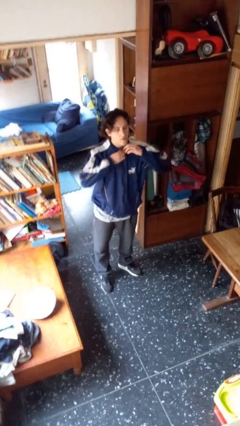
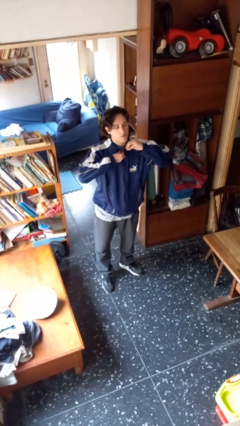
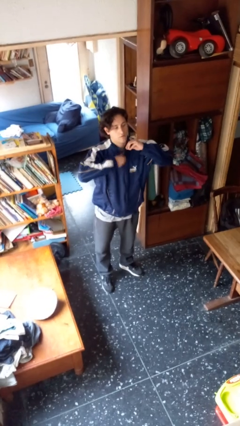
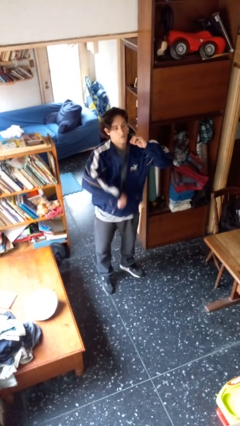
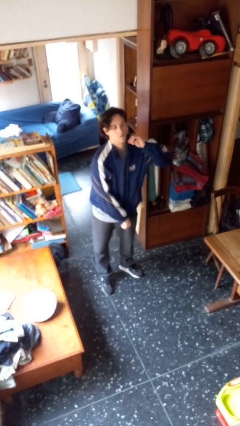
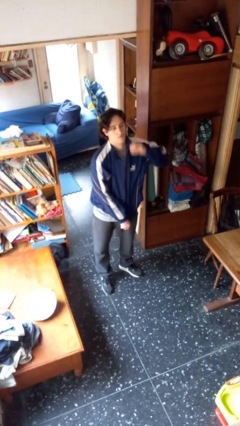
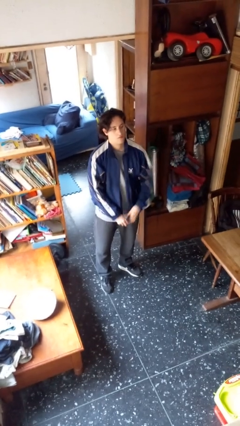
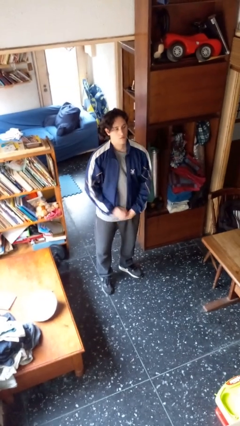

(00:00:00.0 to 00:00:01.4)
person unzips jacket

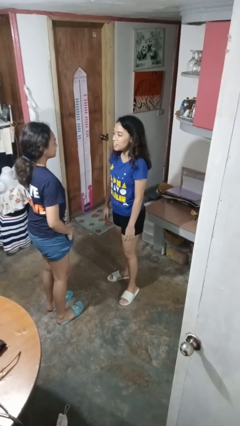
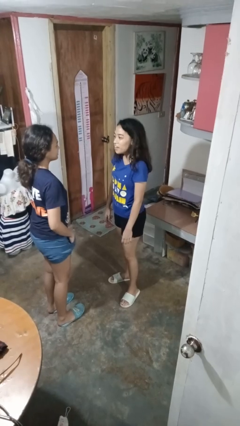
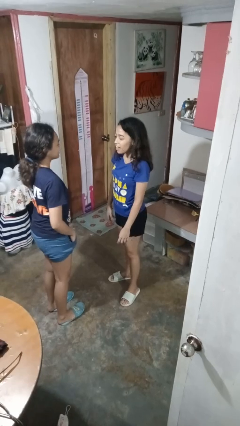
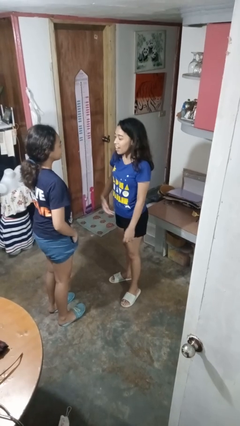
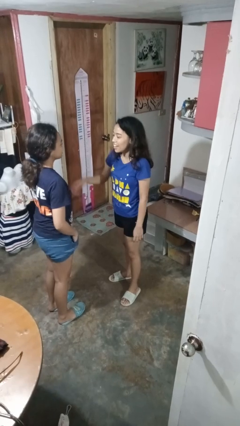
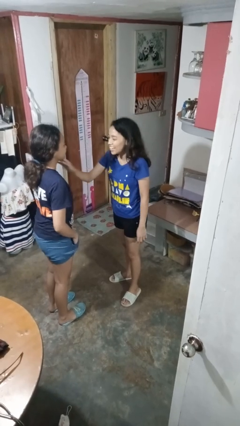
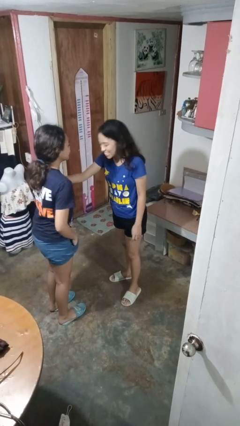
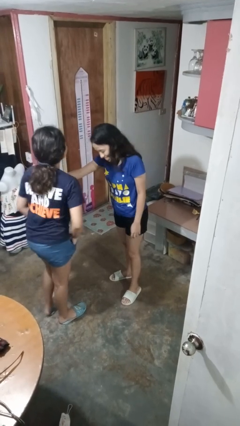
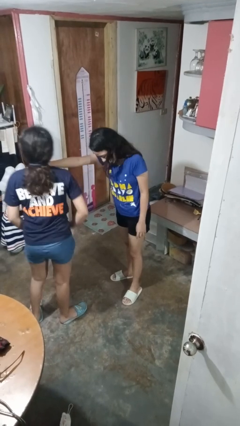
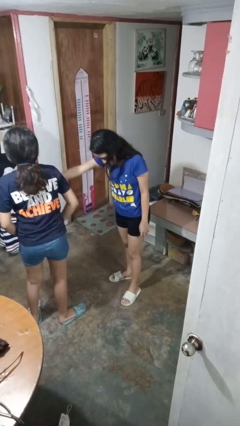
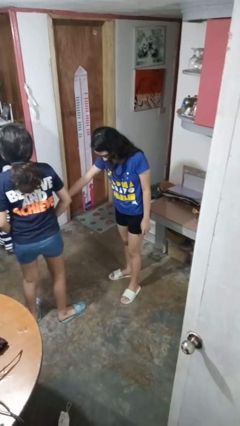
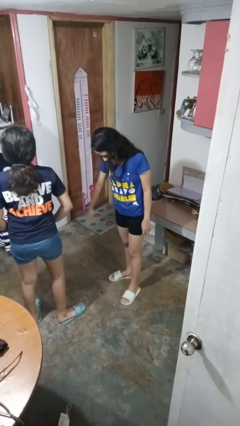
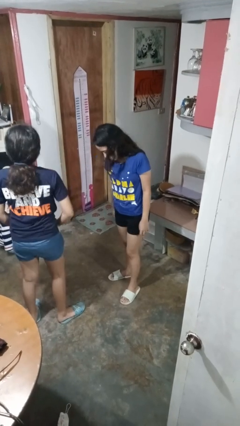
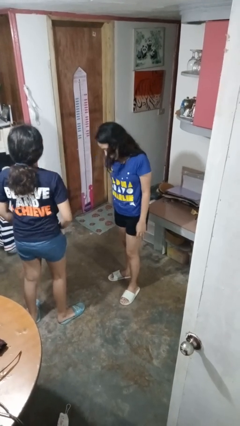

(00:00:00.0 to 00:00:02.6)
person shoves person

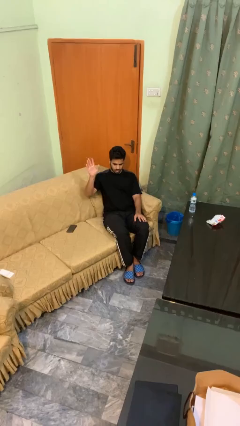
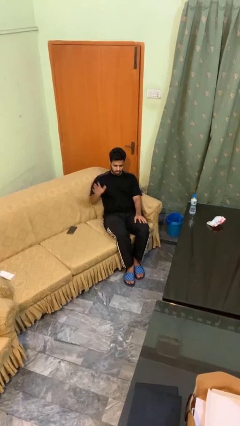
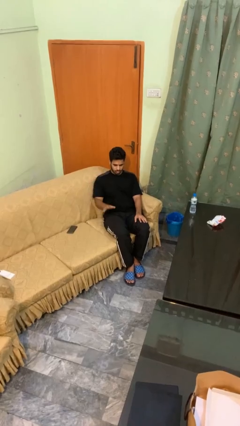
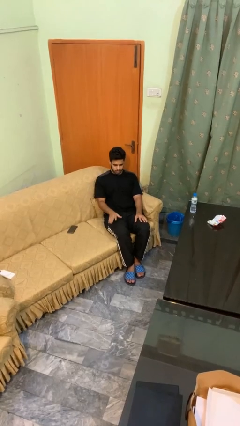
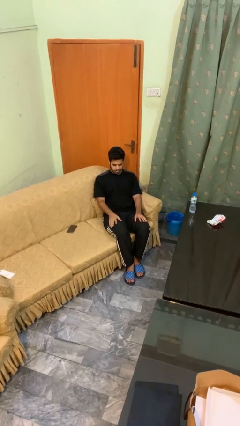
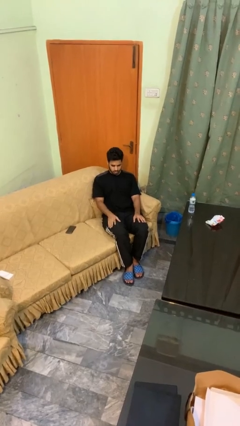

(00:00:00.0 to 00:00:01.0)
person gestures lower hand

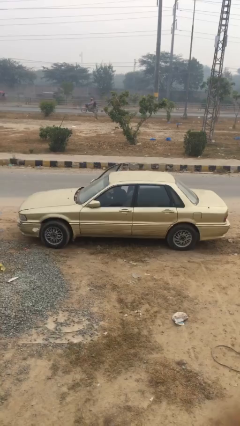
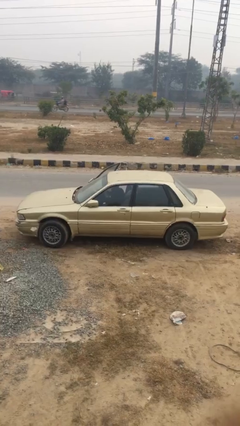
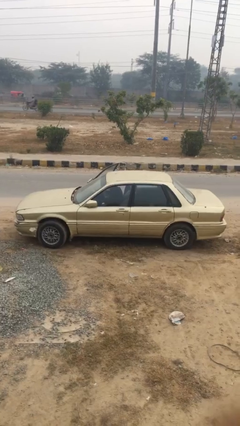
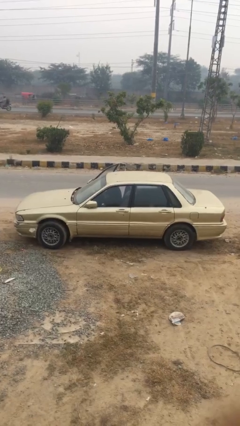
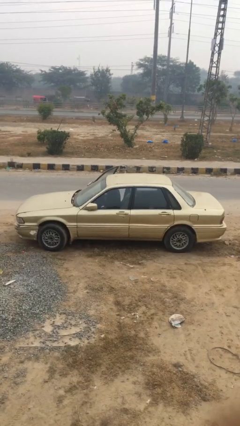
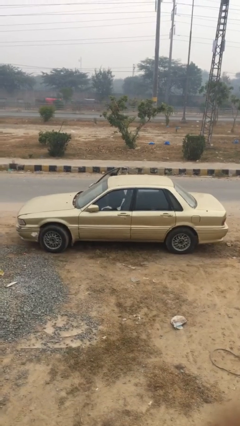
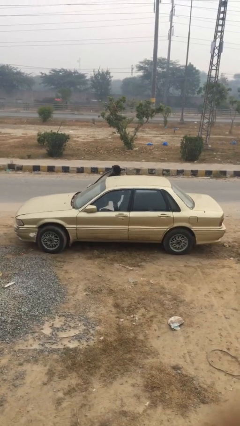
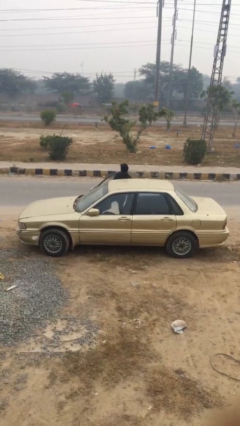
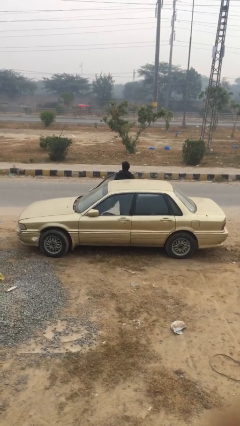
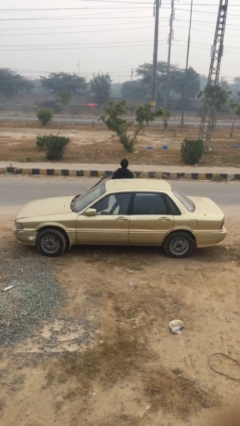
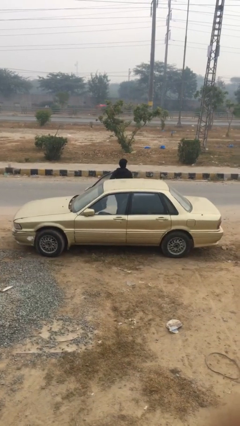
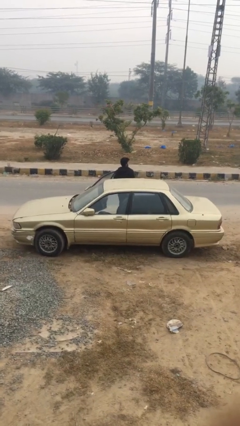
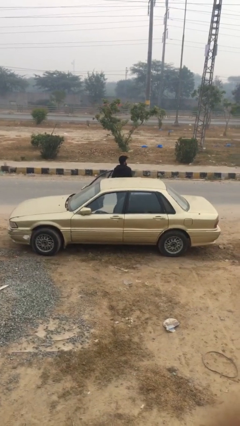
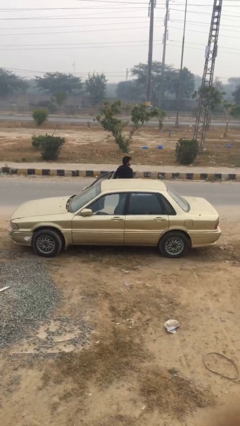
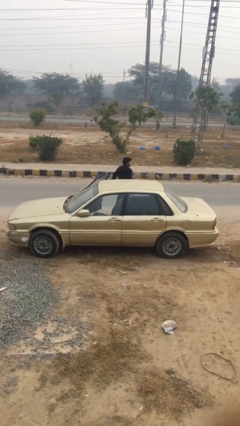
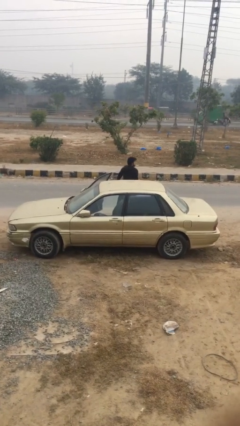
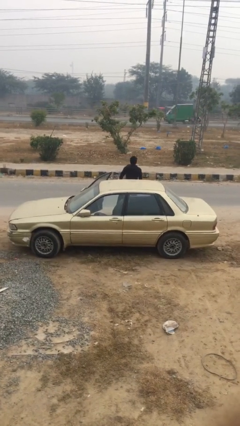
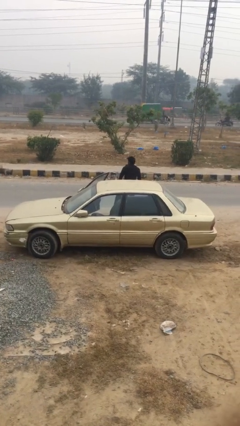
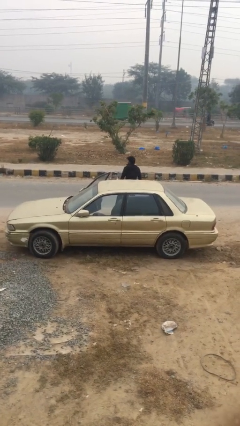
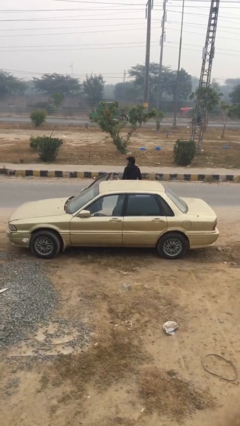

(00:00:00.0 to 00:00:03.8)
person exits car

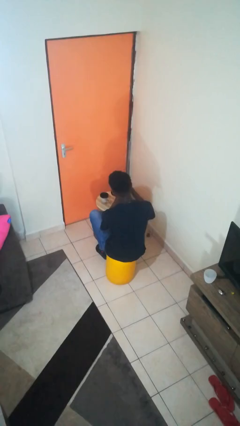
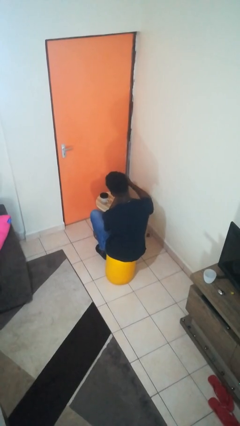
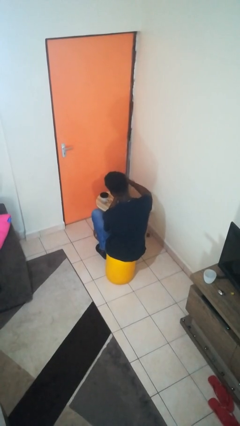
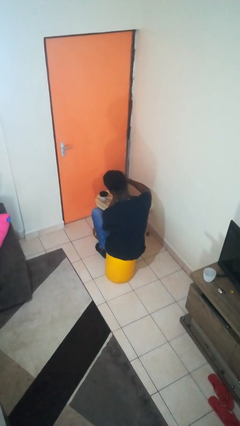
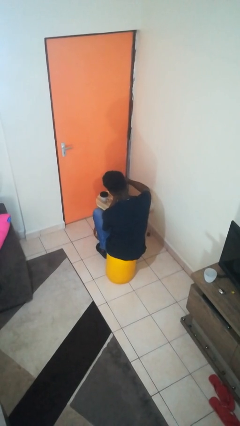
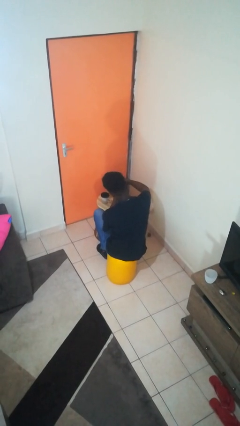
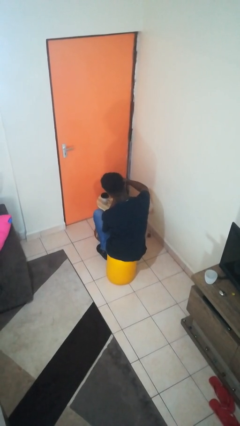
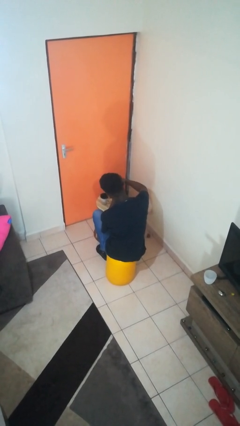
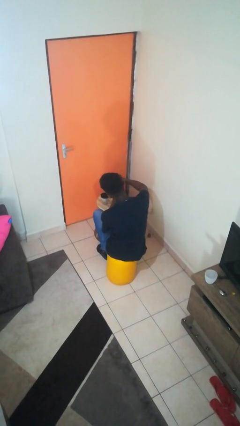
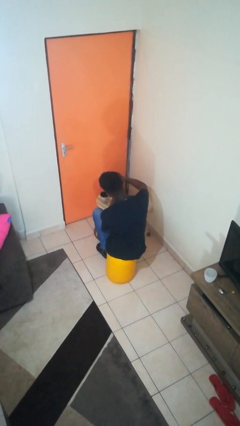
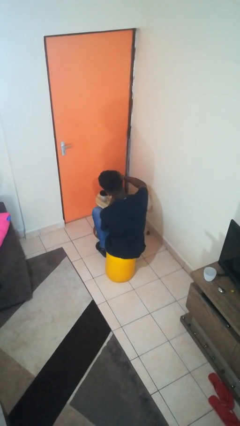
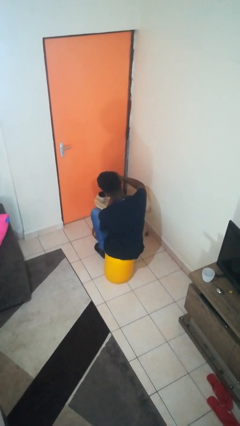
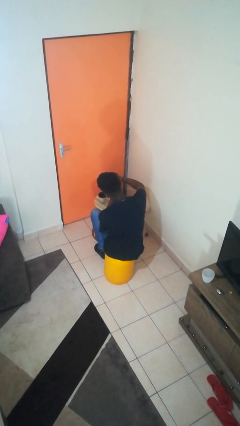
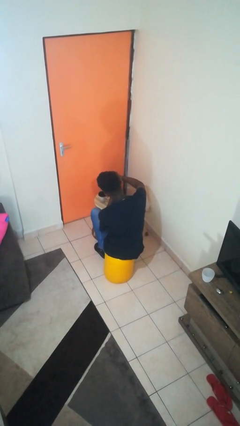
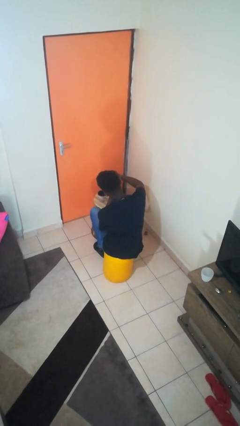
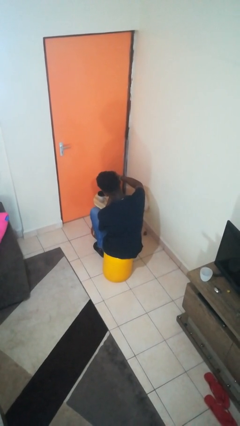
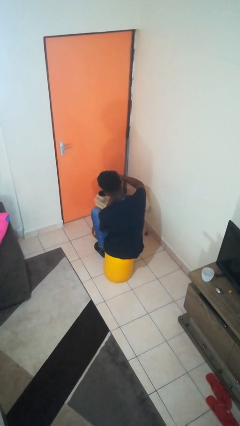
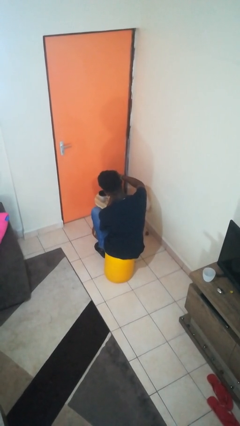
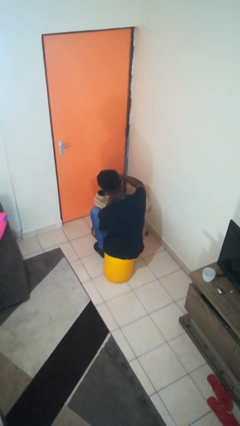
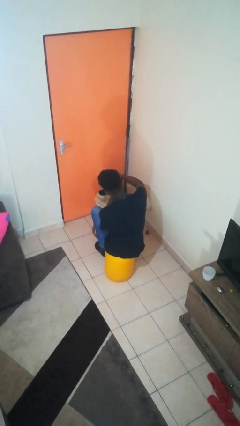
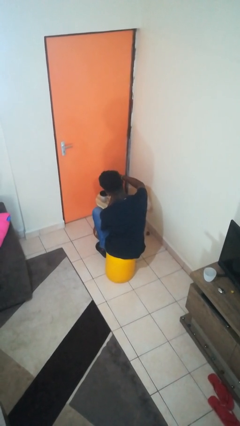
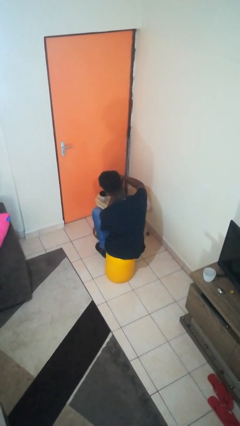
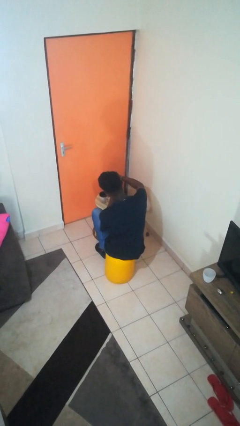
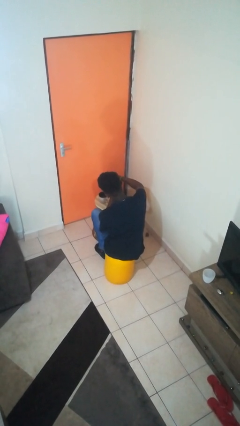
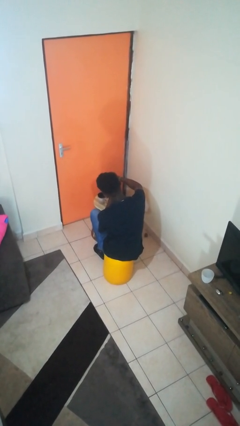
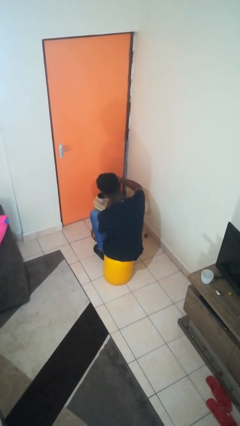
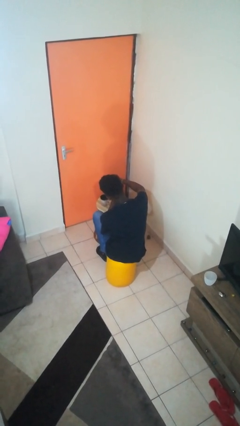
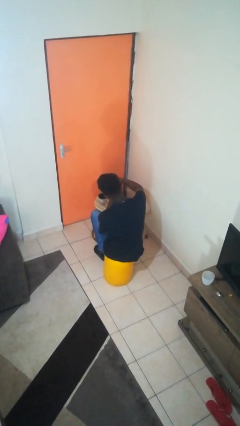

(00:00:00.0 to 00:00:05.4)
person pours coffee into mug

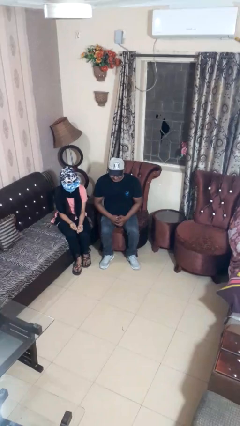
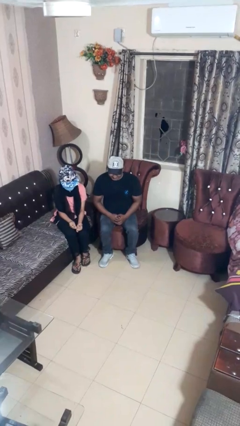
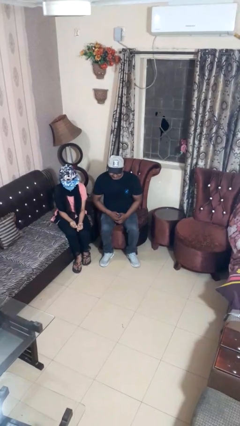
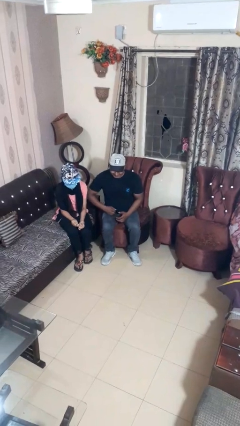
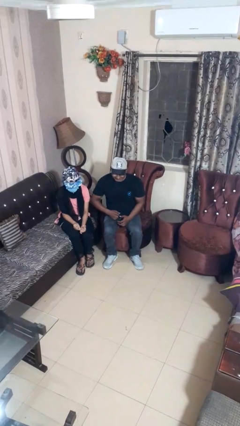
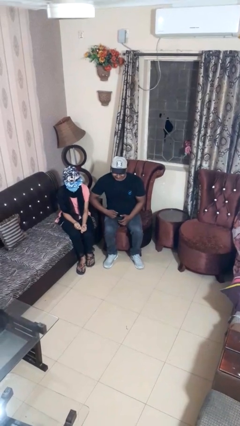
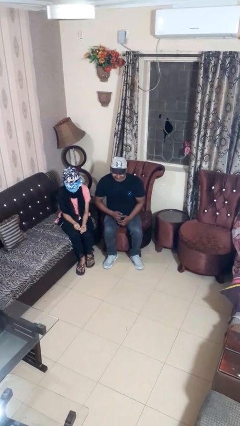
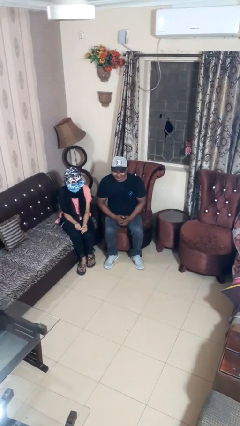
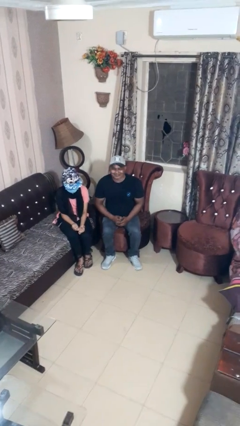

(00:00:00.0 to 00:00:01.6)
person nudges person with elbow

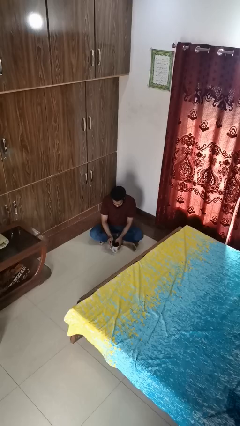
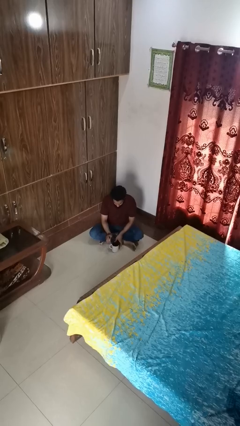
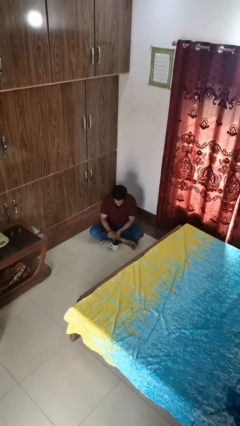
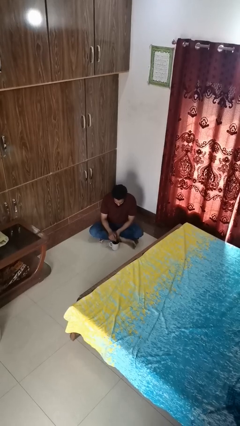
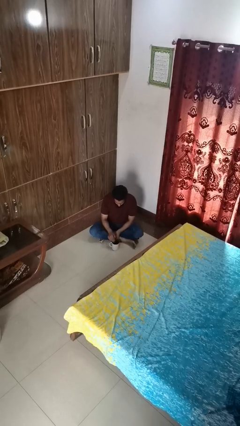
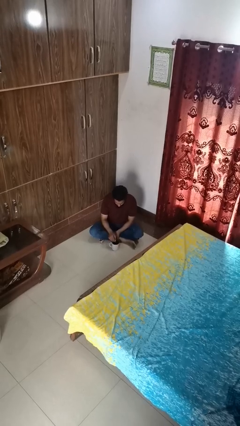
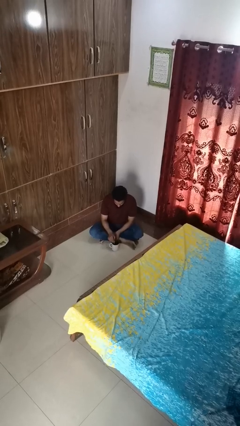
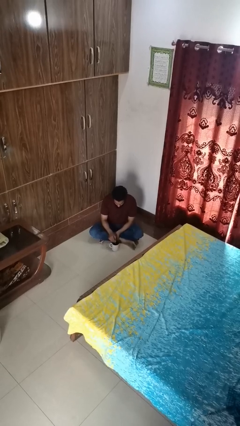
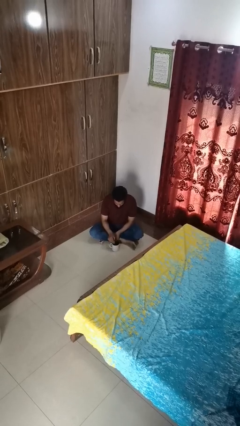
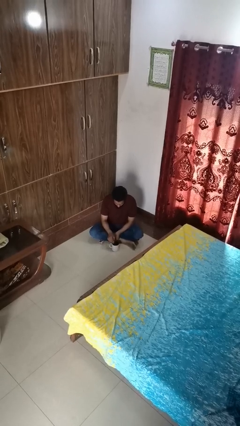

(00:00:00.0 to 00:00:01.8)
person stirs mug
